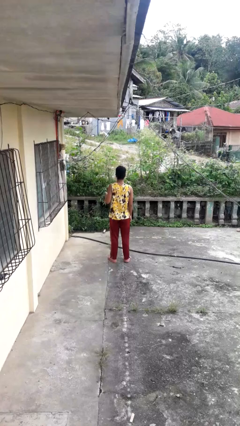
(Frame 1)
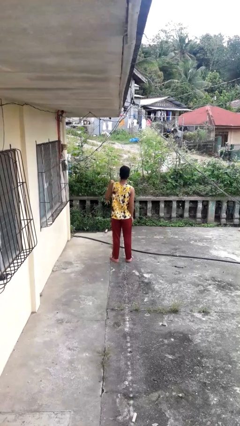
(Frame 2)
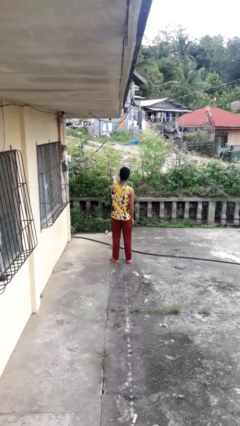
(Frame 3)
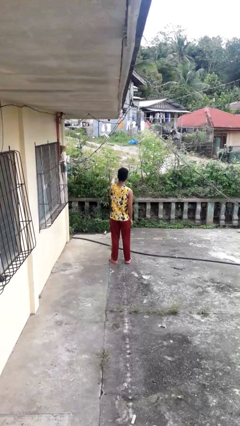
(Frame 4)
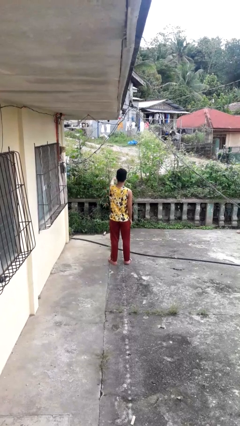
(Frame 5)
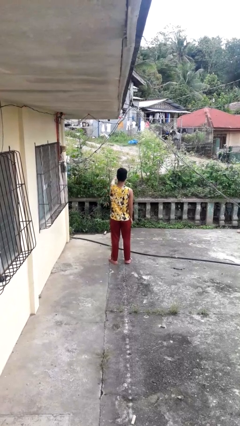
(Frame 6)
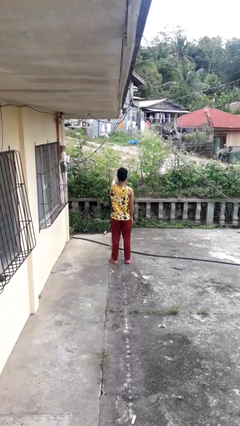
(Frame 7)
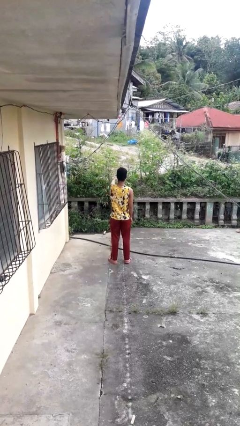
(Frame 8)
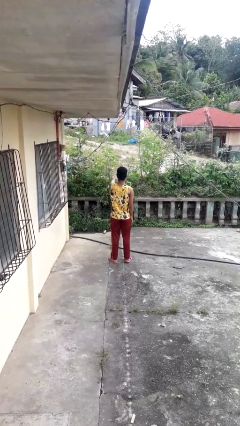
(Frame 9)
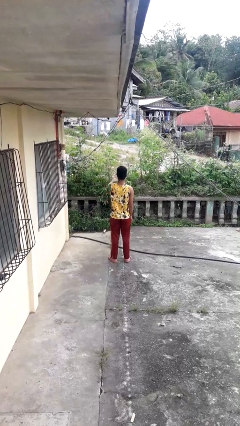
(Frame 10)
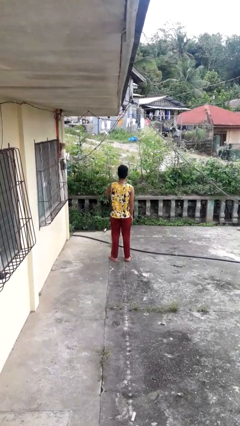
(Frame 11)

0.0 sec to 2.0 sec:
person punches

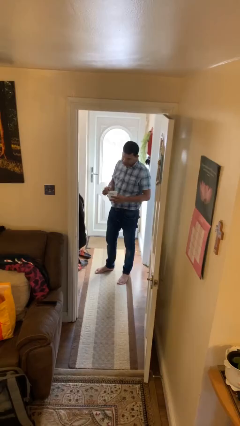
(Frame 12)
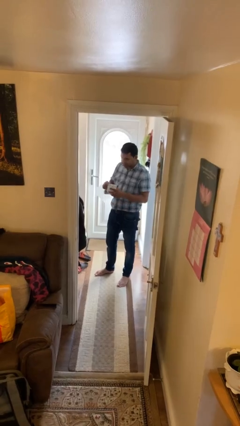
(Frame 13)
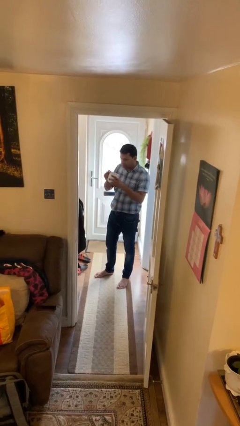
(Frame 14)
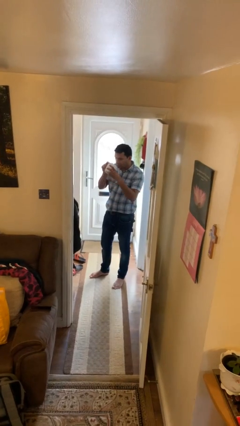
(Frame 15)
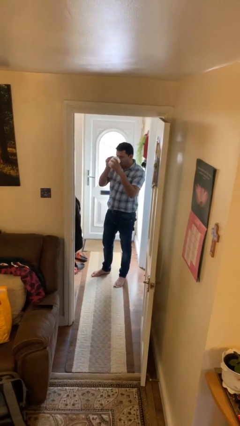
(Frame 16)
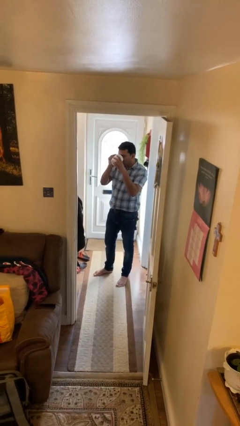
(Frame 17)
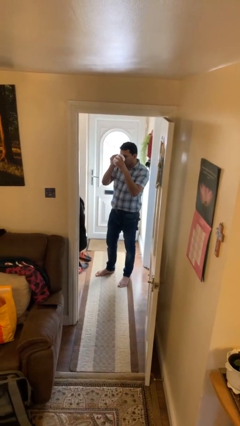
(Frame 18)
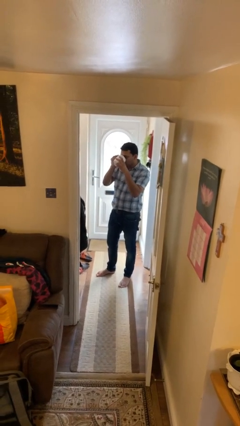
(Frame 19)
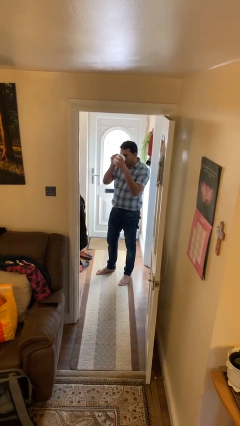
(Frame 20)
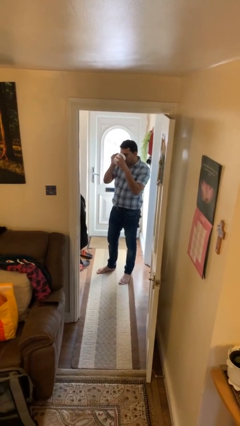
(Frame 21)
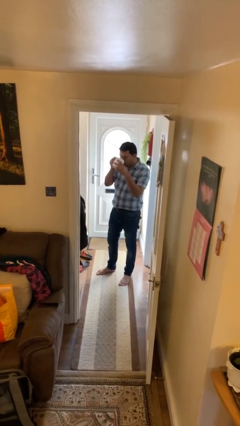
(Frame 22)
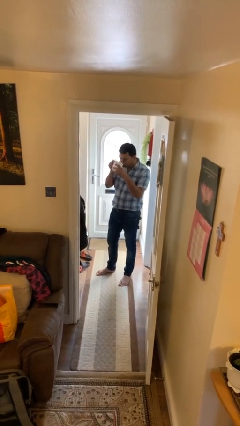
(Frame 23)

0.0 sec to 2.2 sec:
person drinks from mug

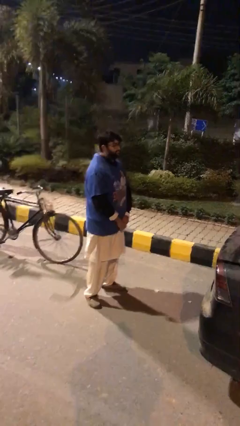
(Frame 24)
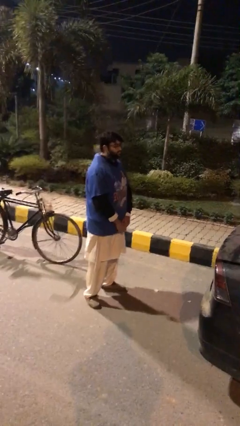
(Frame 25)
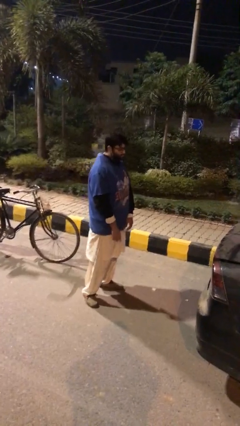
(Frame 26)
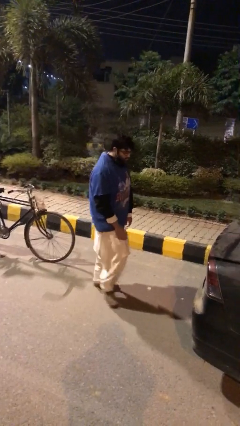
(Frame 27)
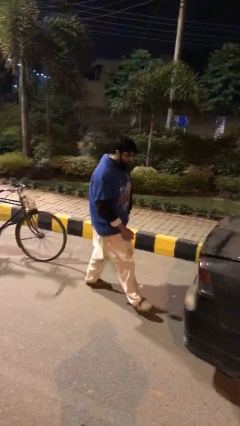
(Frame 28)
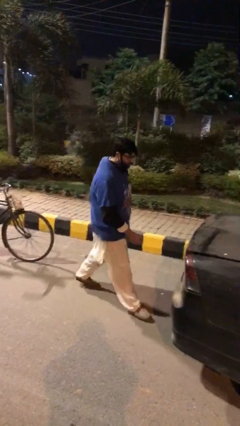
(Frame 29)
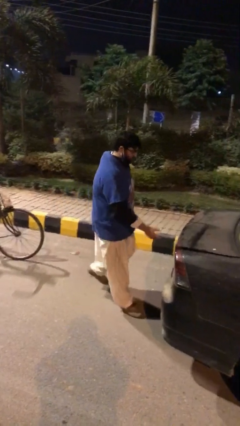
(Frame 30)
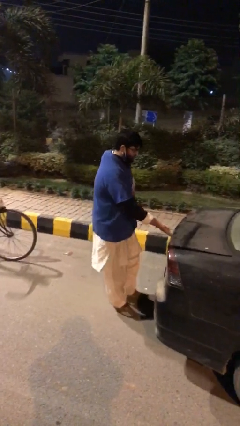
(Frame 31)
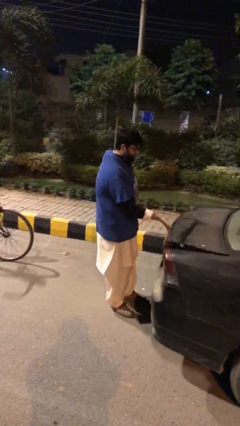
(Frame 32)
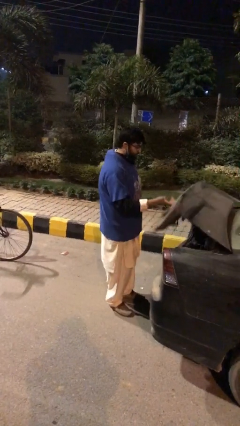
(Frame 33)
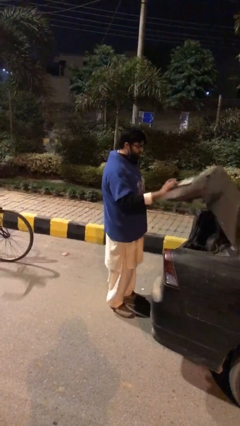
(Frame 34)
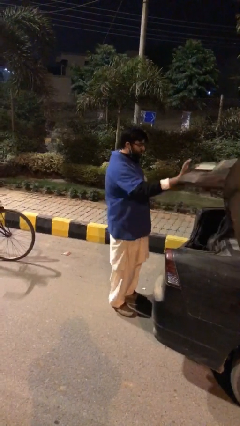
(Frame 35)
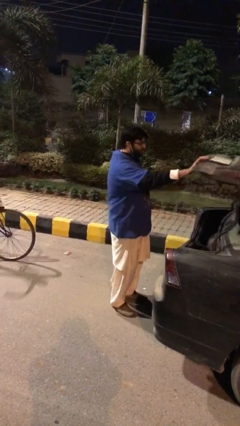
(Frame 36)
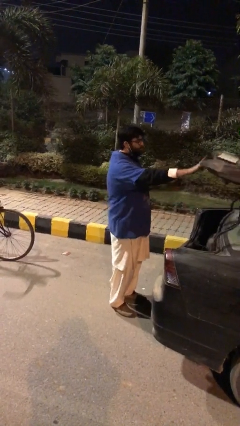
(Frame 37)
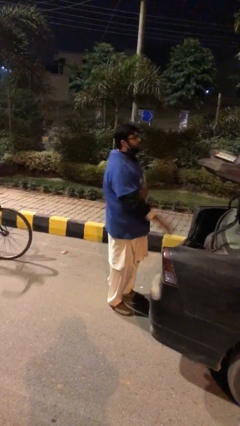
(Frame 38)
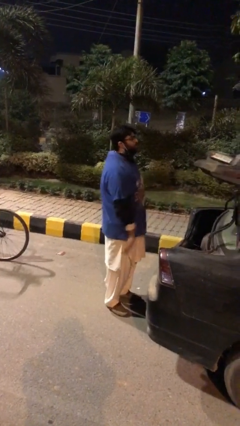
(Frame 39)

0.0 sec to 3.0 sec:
person opens car trunk

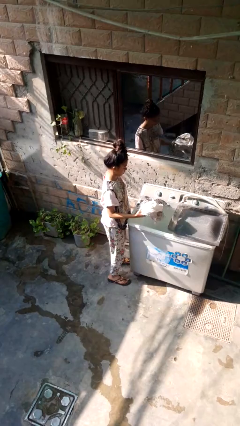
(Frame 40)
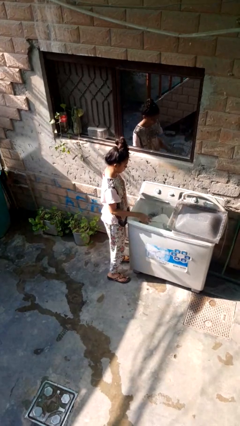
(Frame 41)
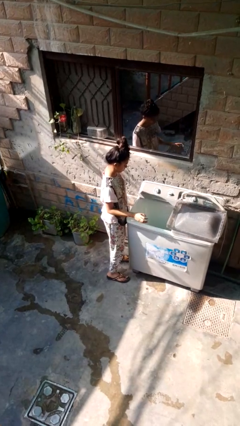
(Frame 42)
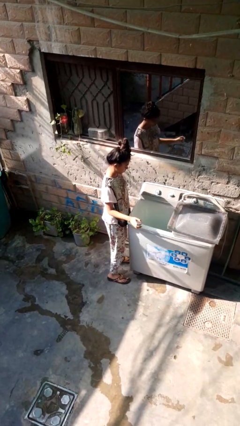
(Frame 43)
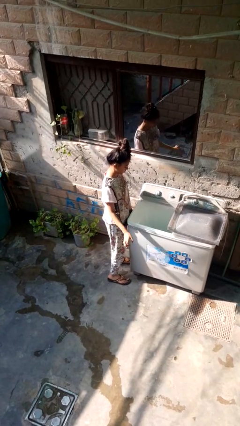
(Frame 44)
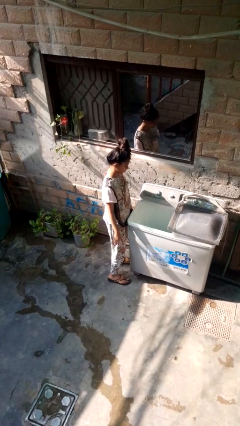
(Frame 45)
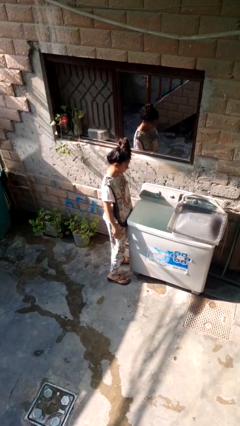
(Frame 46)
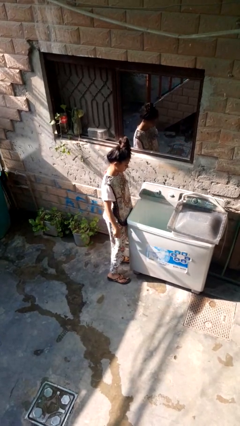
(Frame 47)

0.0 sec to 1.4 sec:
person loads clotheswasher

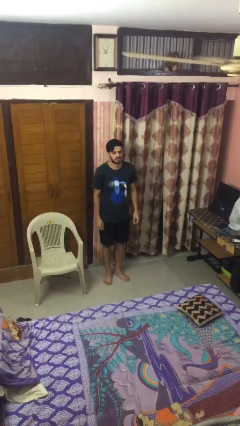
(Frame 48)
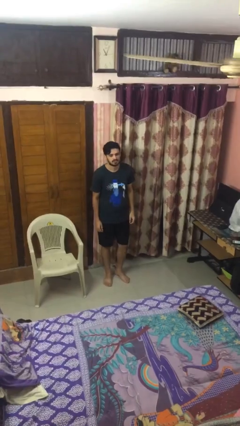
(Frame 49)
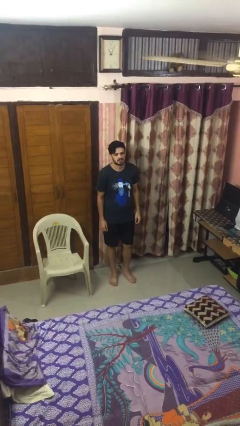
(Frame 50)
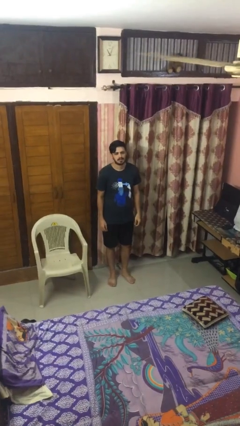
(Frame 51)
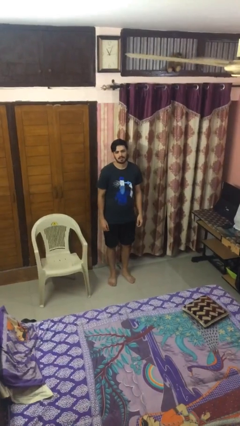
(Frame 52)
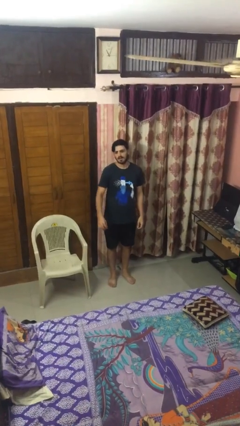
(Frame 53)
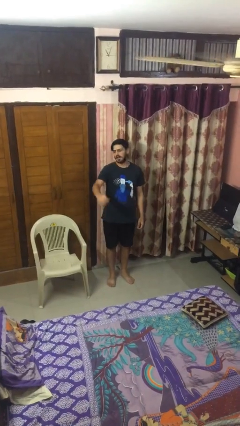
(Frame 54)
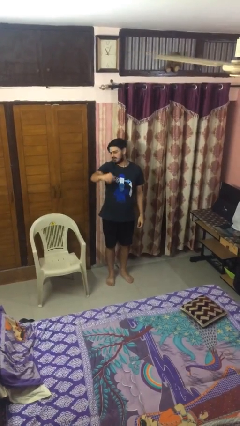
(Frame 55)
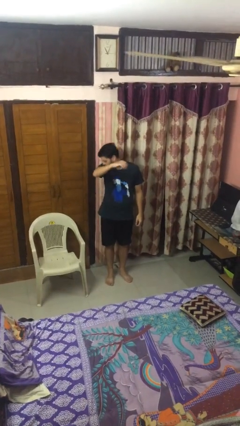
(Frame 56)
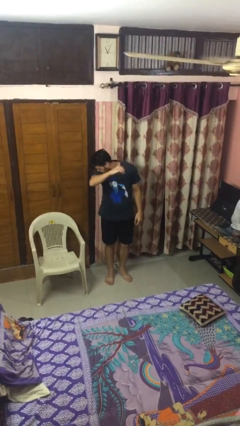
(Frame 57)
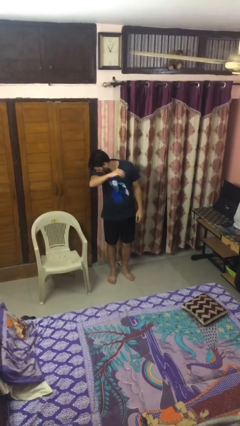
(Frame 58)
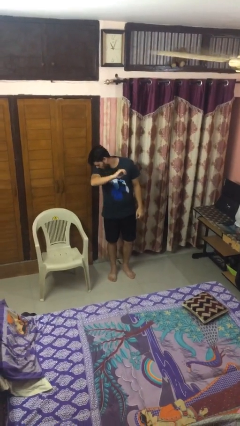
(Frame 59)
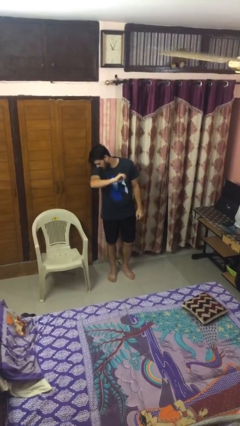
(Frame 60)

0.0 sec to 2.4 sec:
person sneezes into arm

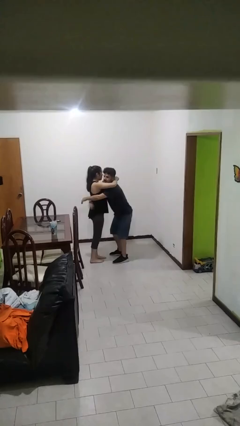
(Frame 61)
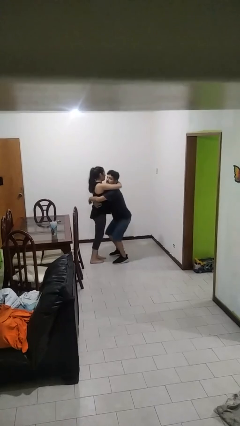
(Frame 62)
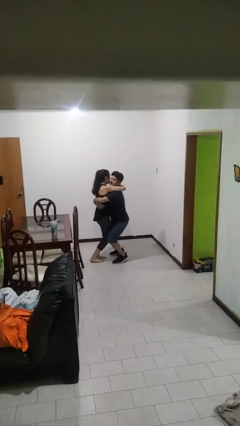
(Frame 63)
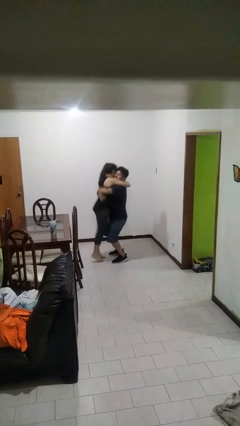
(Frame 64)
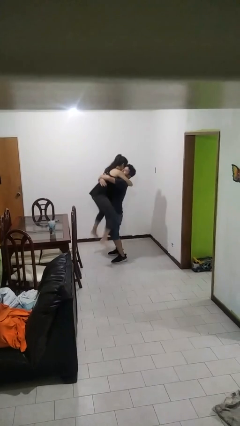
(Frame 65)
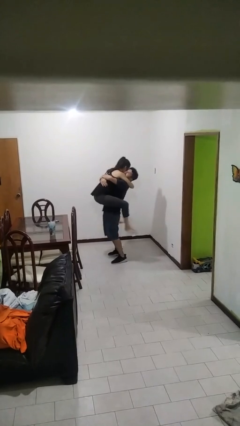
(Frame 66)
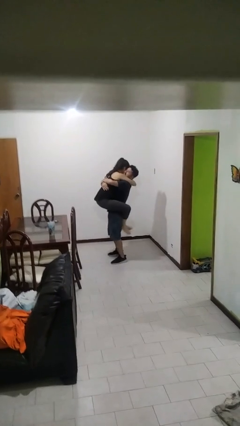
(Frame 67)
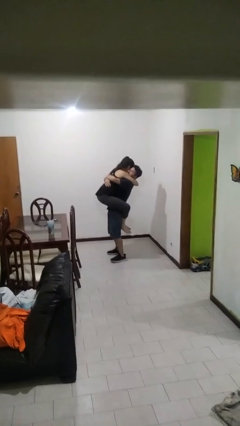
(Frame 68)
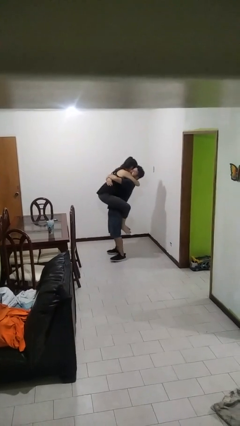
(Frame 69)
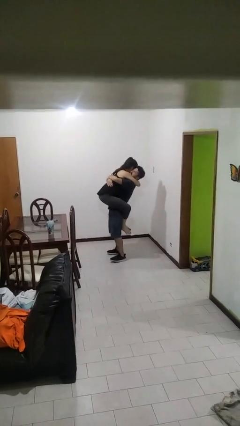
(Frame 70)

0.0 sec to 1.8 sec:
person picks up person

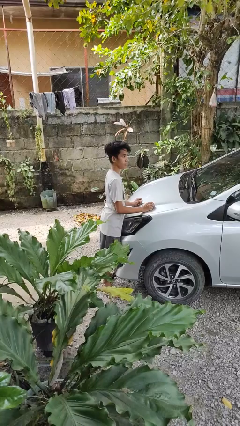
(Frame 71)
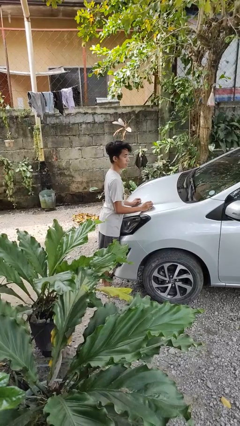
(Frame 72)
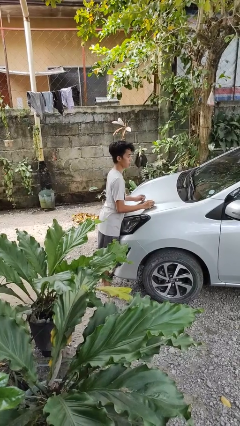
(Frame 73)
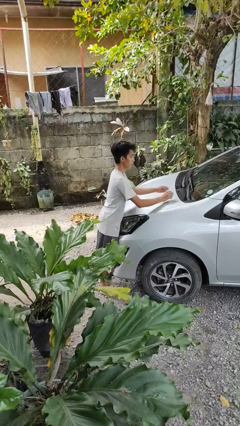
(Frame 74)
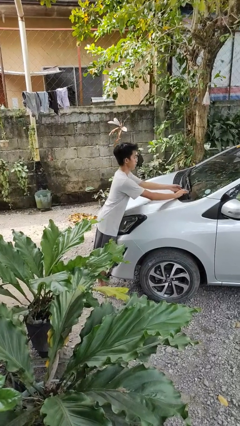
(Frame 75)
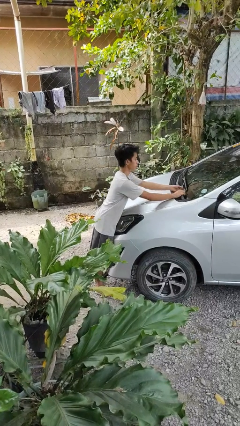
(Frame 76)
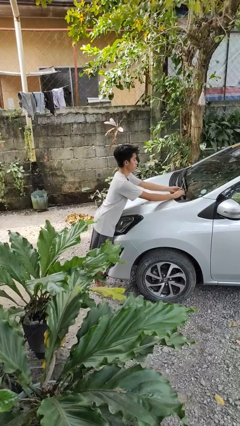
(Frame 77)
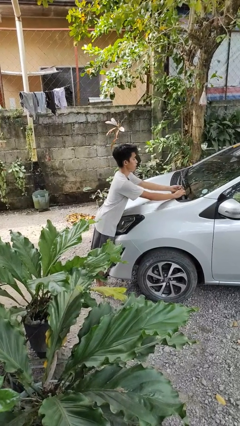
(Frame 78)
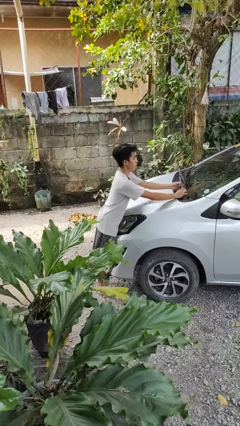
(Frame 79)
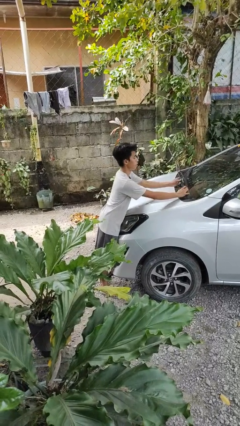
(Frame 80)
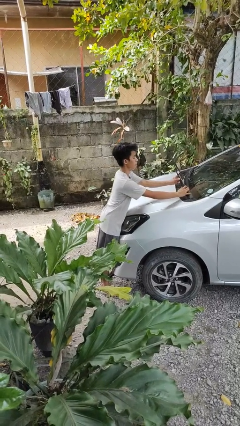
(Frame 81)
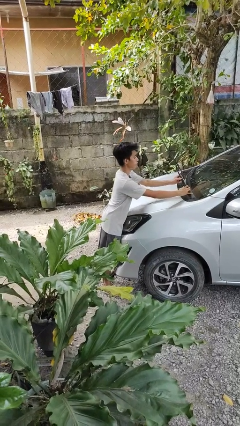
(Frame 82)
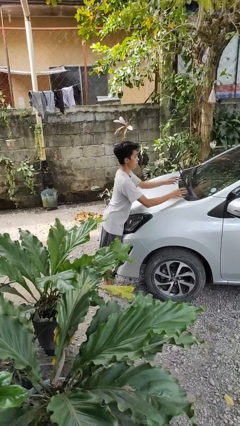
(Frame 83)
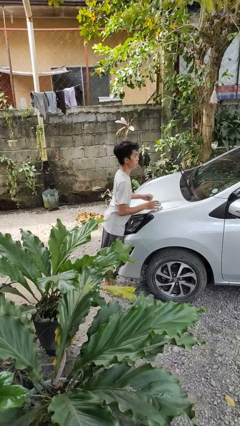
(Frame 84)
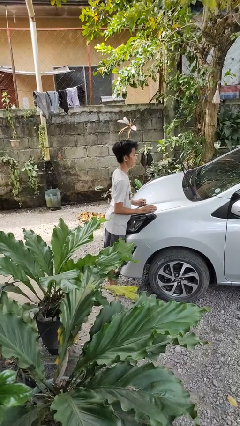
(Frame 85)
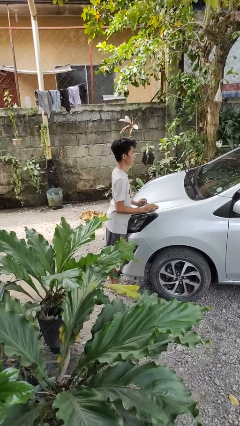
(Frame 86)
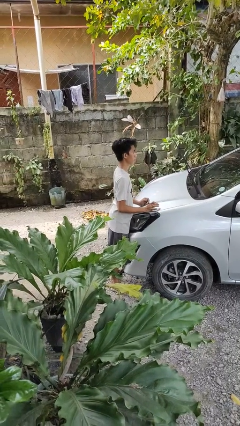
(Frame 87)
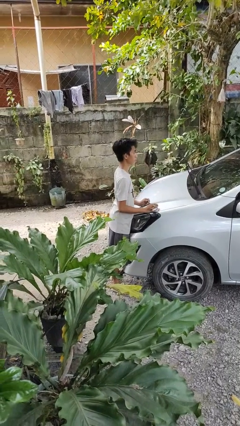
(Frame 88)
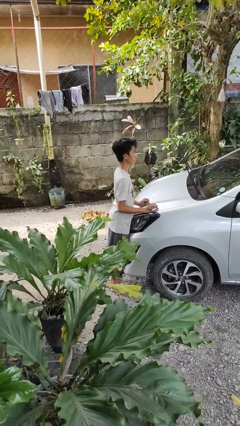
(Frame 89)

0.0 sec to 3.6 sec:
person flips up car wipers

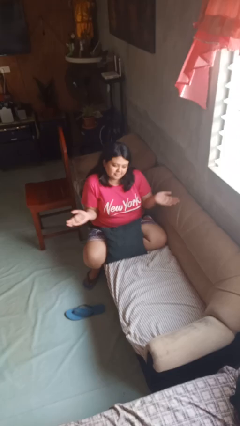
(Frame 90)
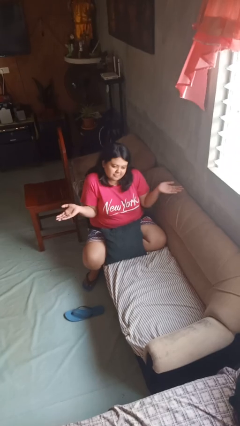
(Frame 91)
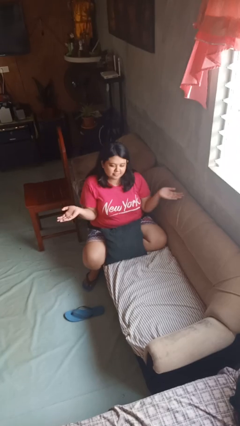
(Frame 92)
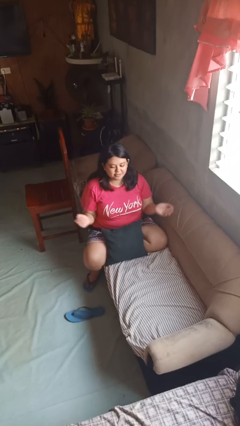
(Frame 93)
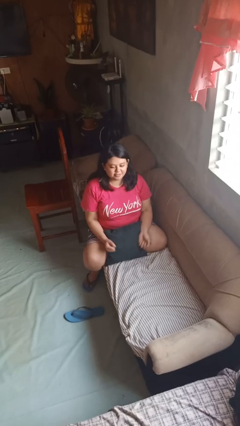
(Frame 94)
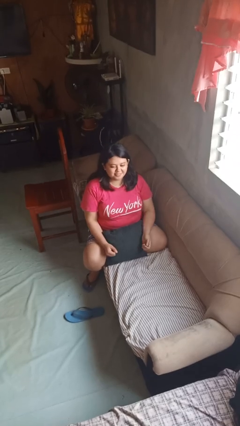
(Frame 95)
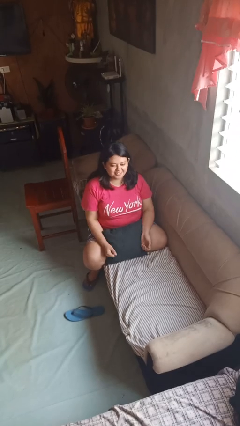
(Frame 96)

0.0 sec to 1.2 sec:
person shrugs
